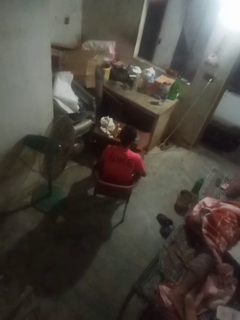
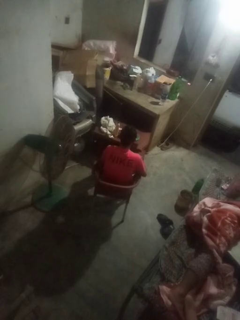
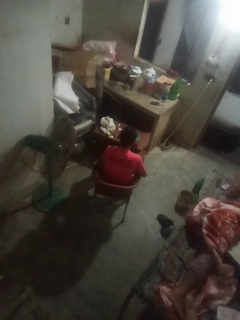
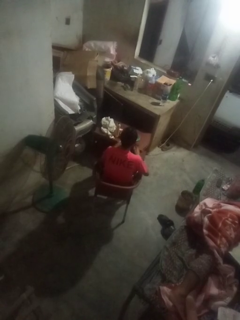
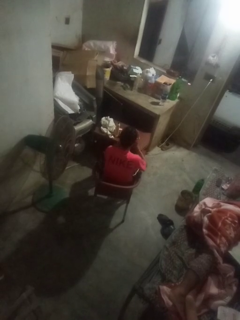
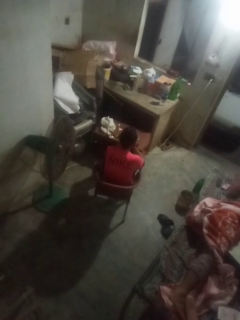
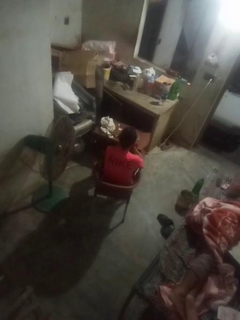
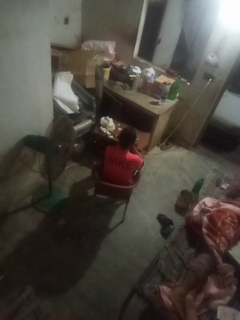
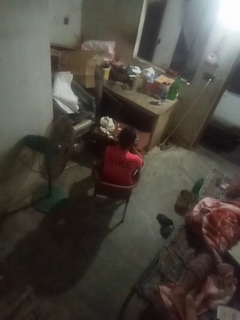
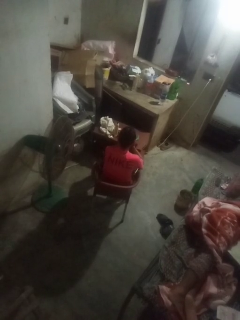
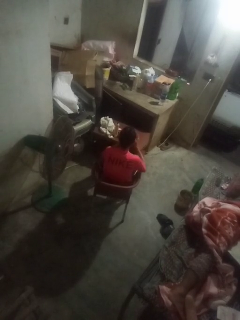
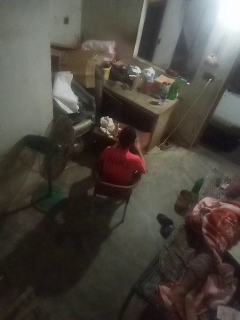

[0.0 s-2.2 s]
person yawns

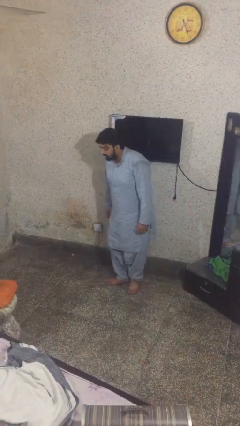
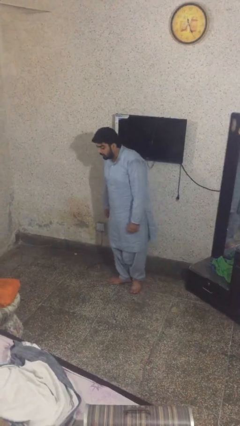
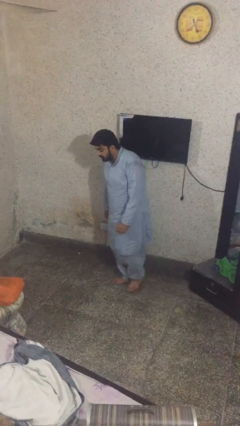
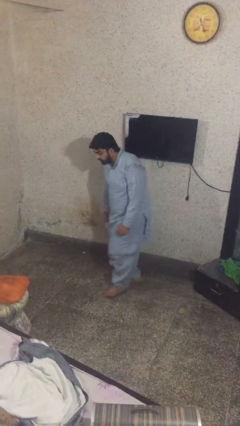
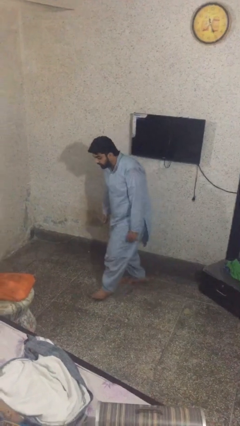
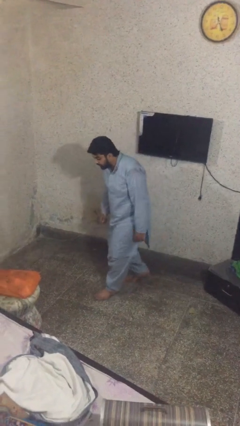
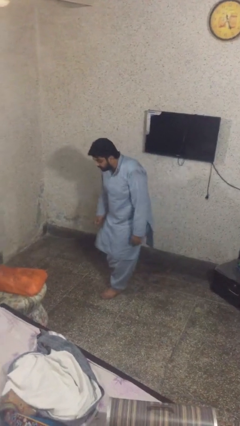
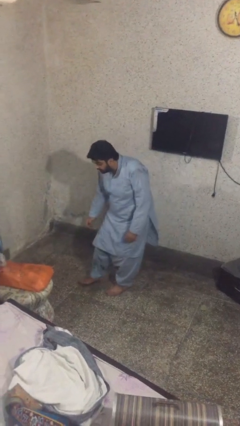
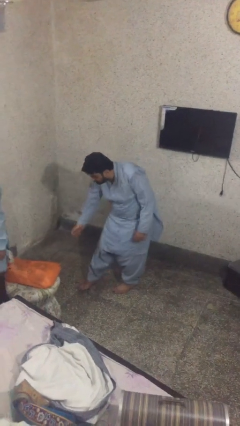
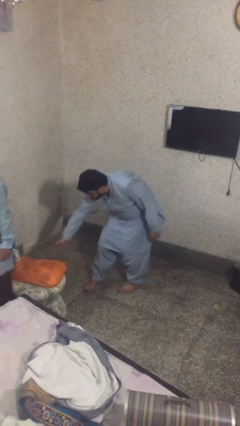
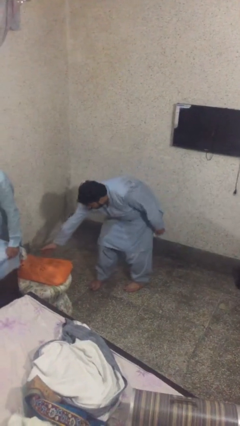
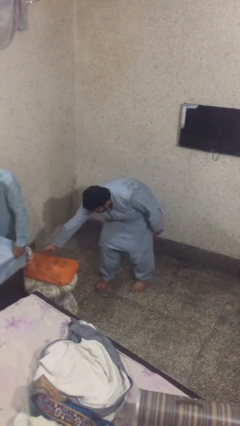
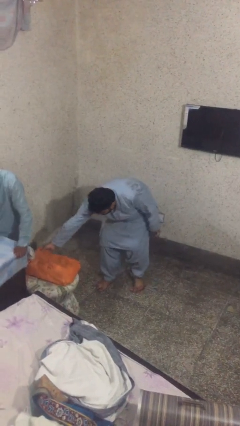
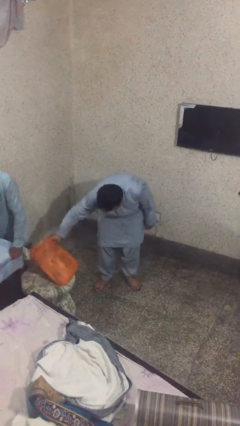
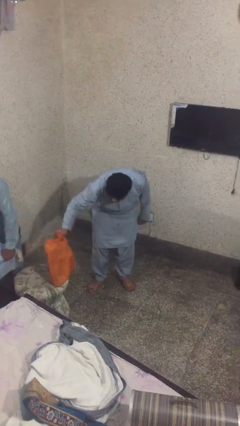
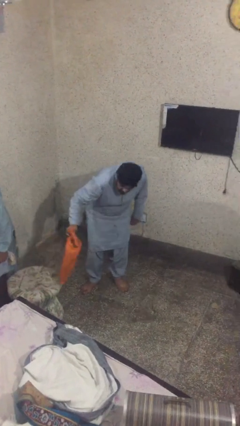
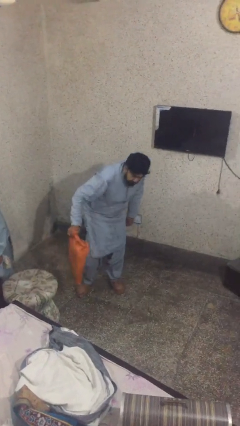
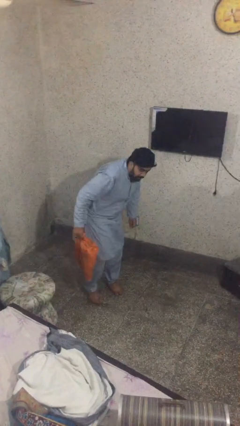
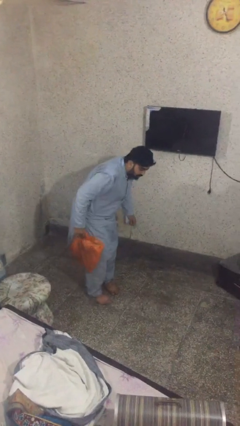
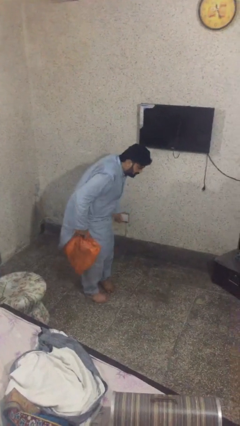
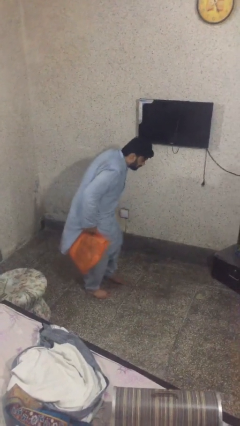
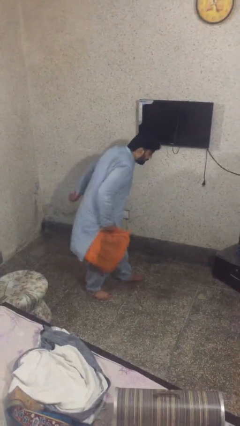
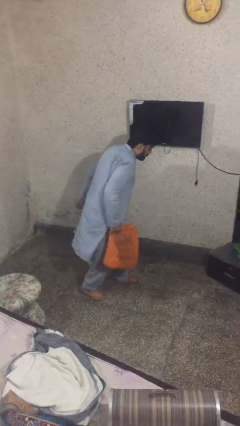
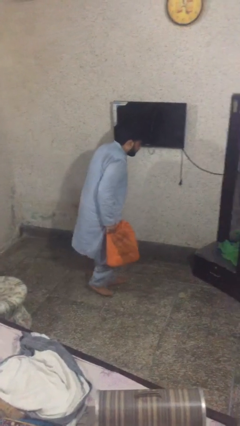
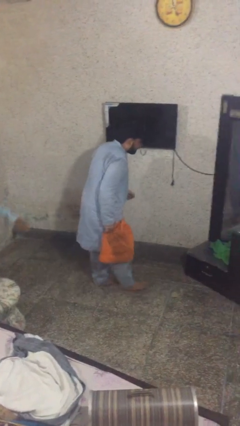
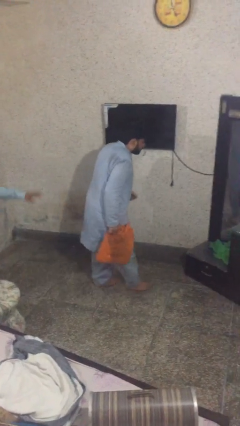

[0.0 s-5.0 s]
person steals object from person

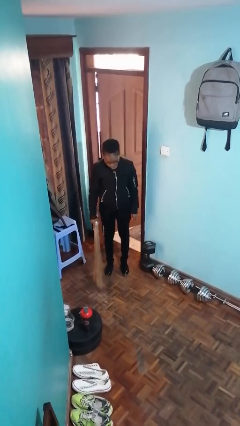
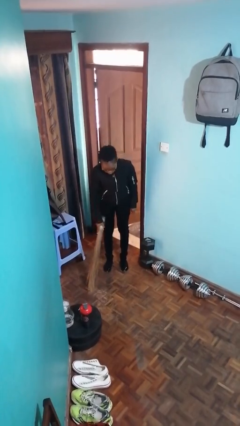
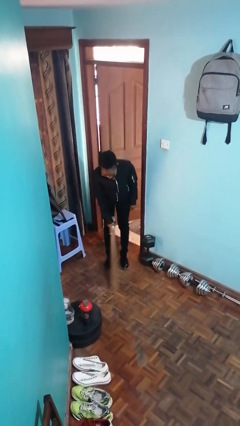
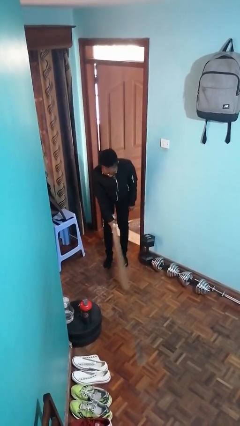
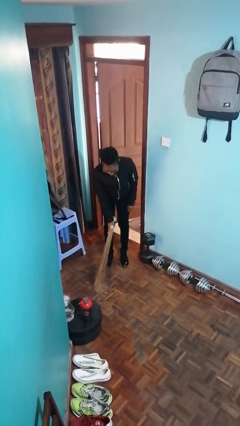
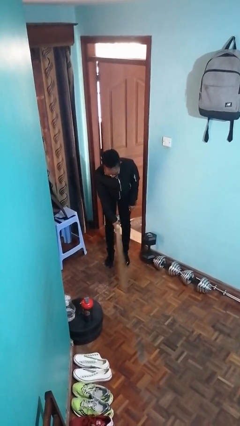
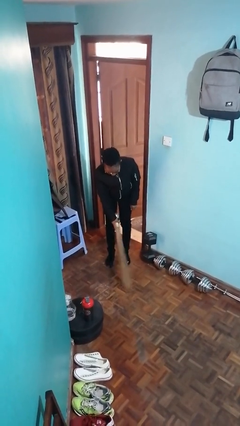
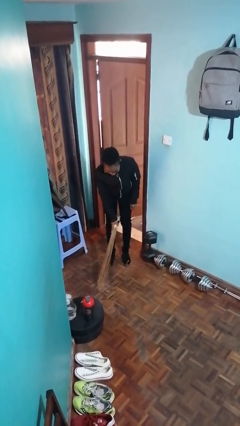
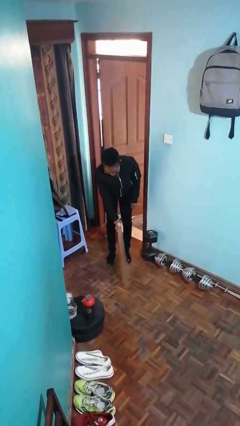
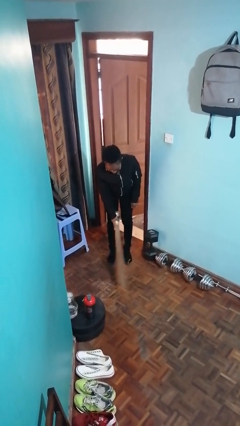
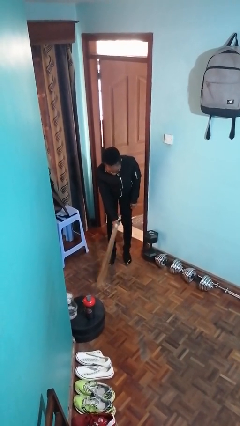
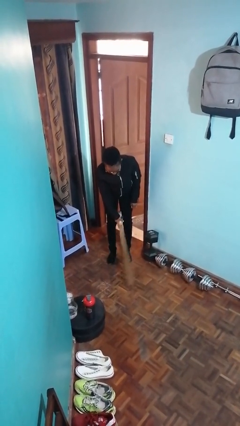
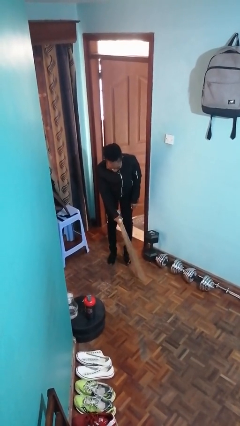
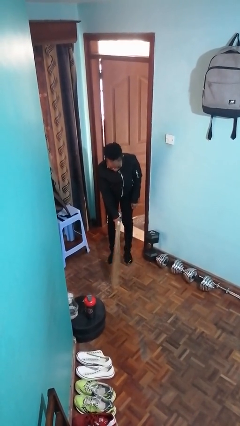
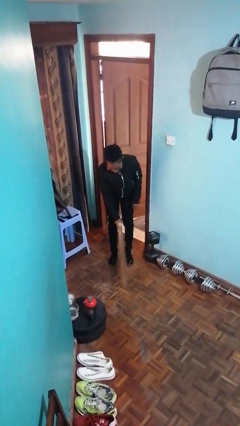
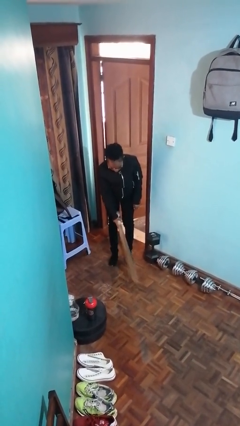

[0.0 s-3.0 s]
person sweeps floor

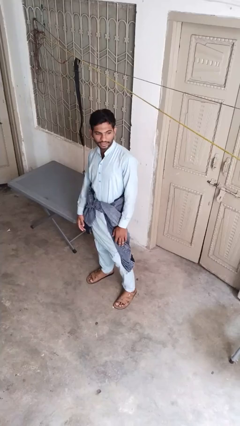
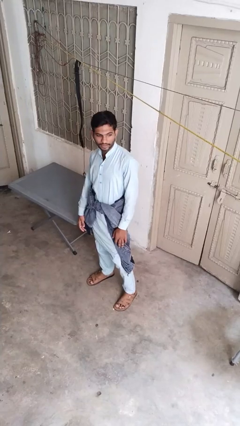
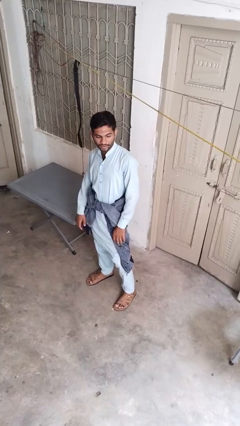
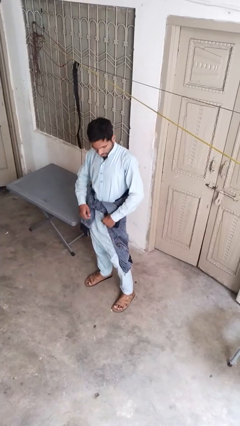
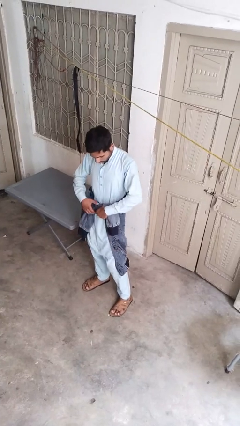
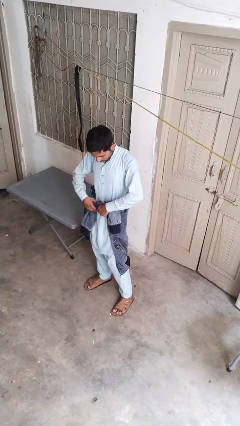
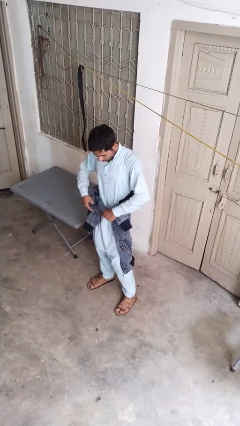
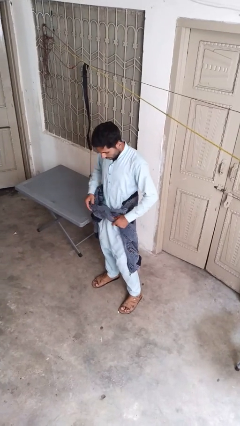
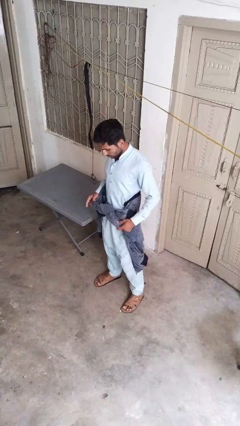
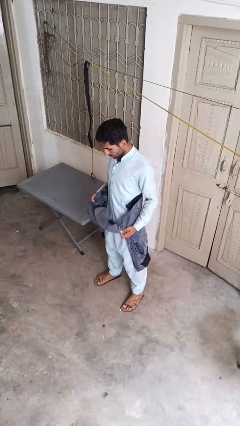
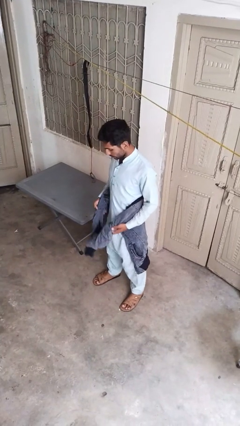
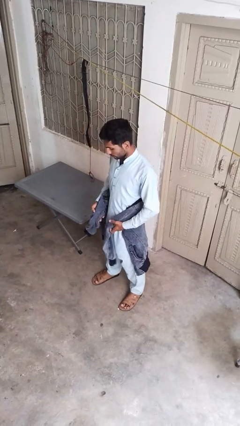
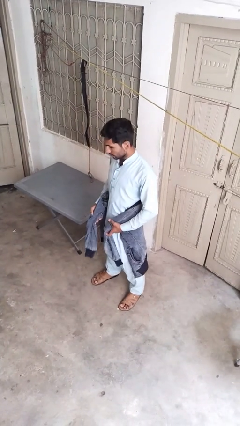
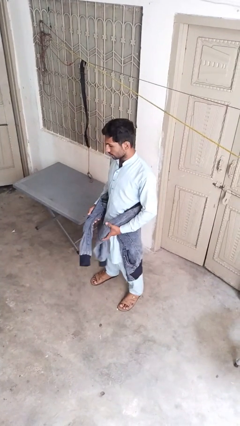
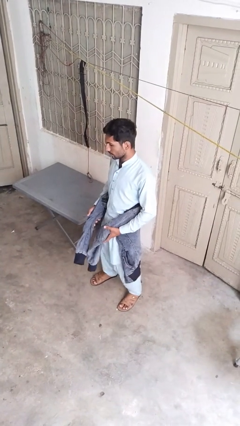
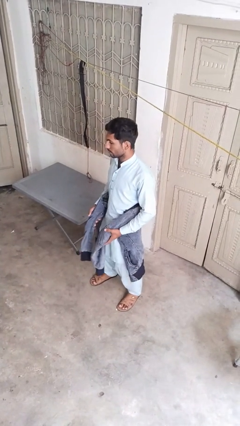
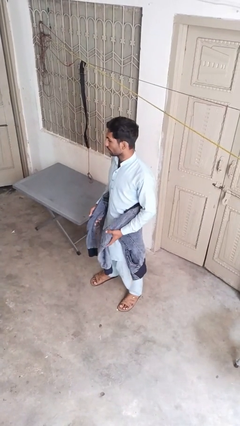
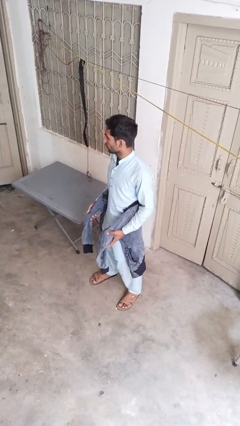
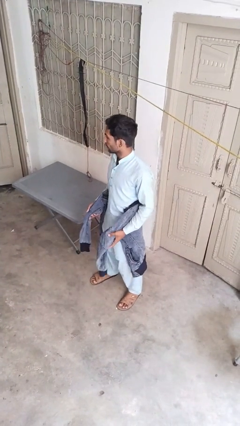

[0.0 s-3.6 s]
person unties jacket around waist

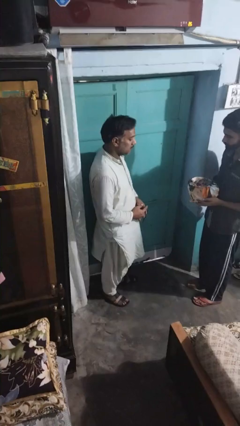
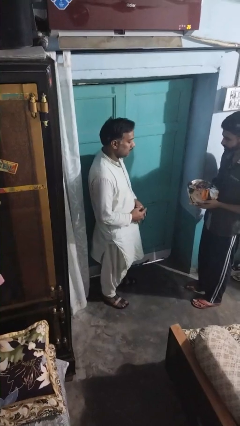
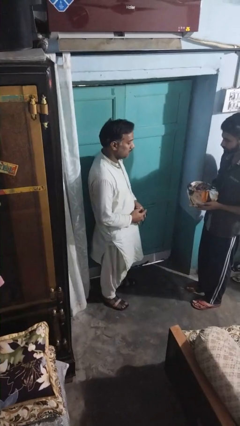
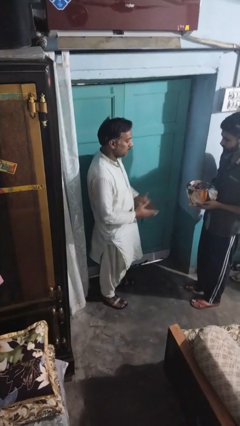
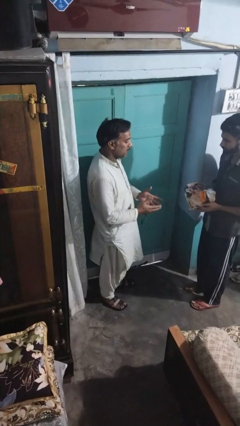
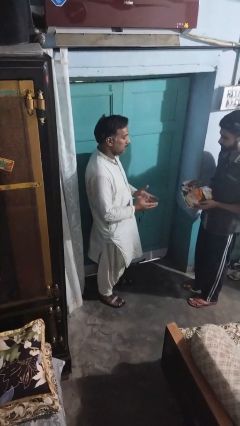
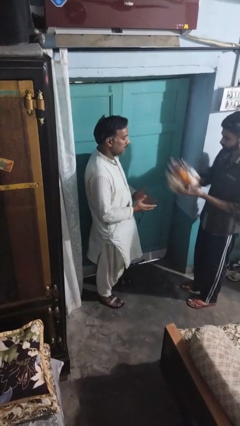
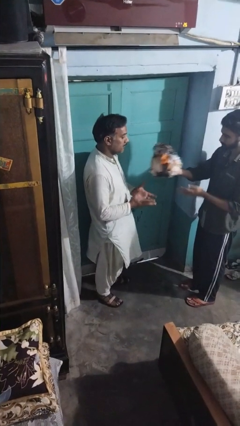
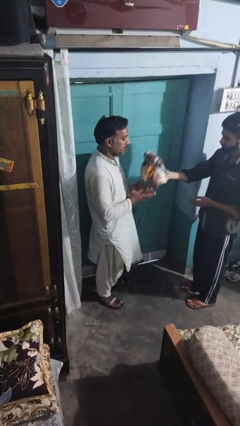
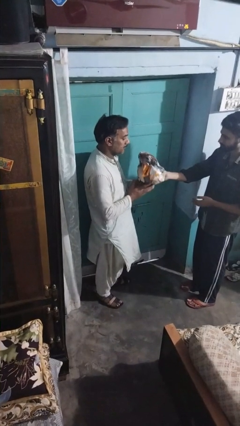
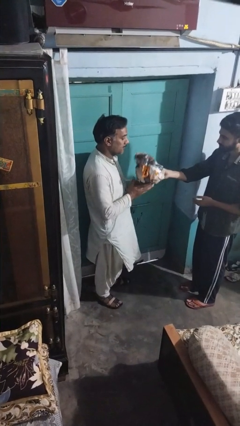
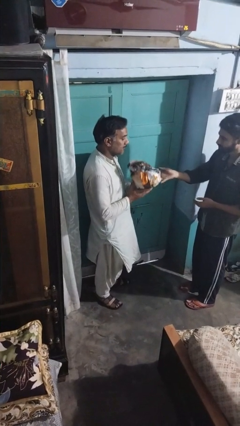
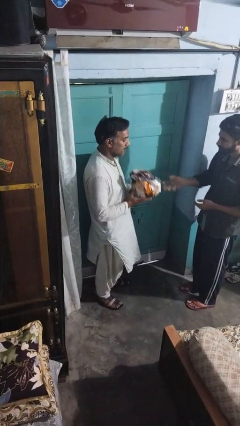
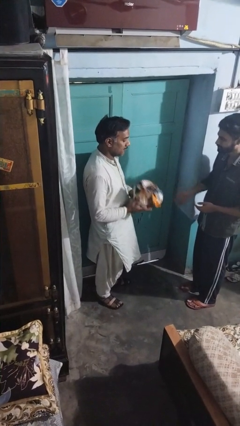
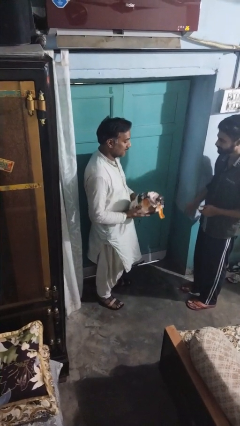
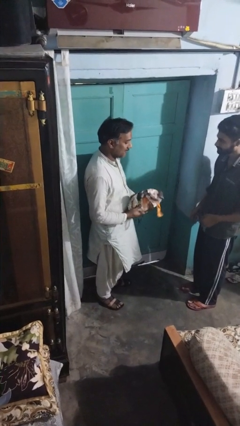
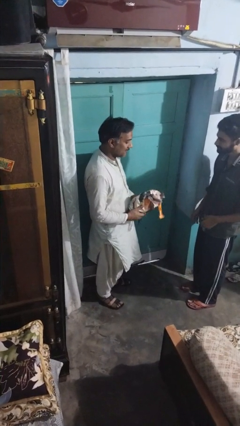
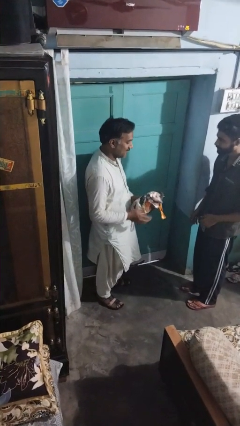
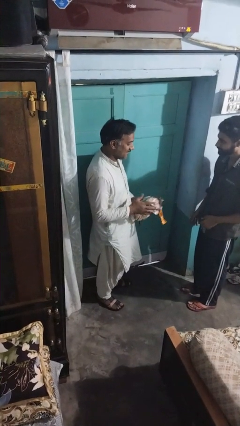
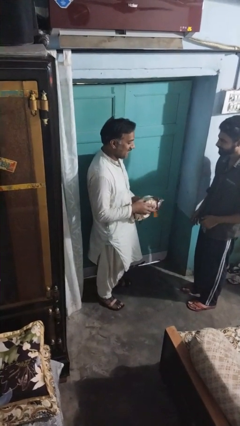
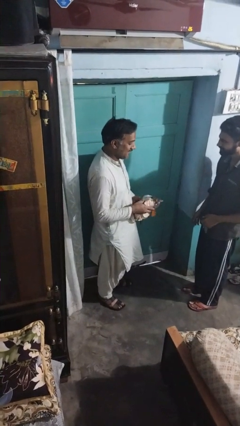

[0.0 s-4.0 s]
person catches object from person

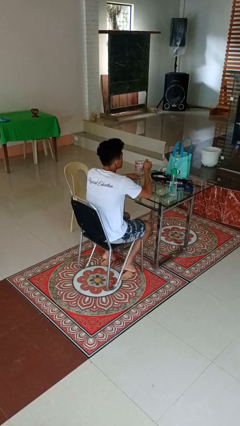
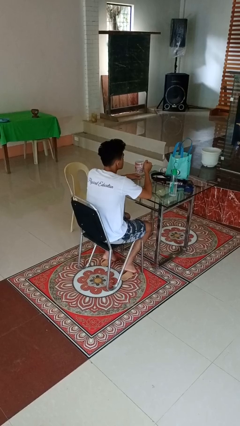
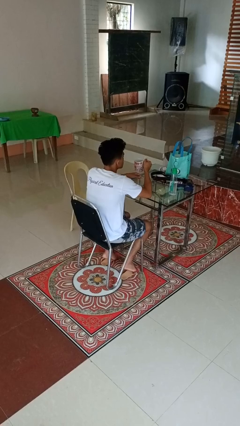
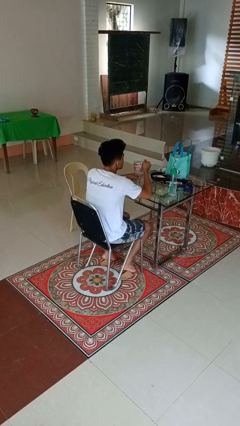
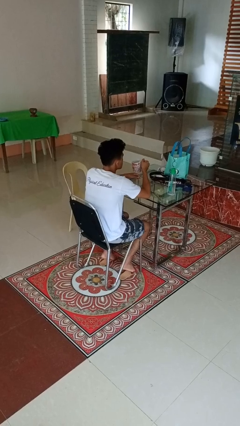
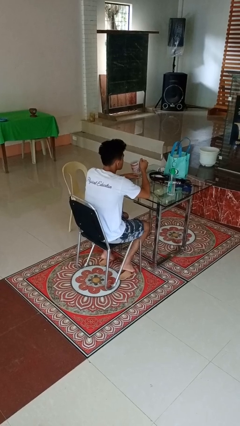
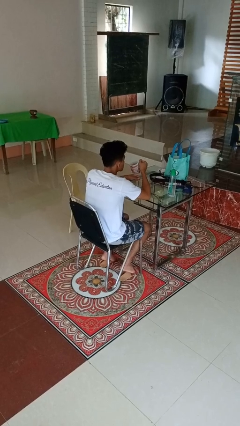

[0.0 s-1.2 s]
person picks up object from table
